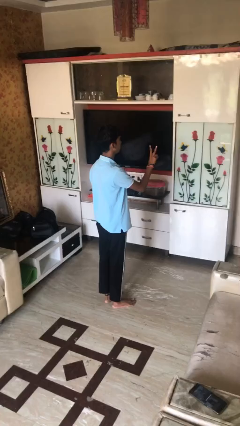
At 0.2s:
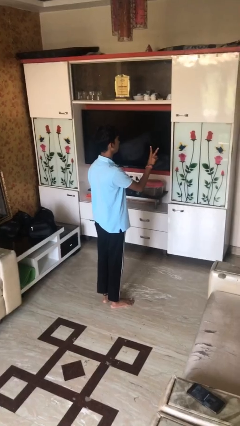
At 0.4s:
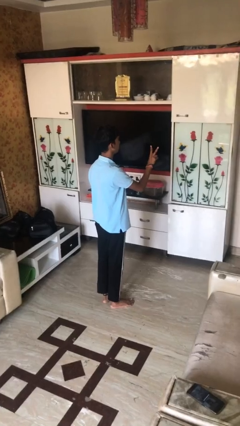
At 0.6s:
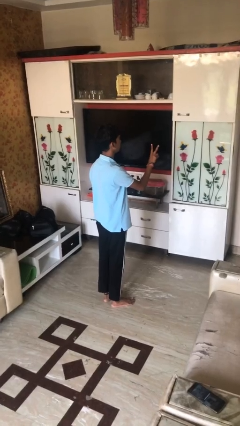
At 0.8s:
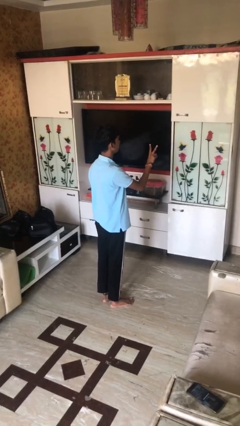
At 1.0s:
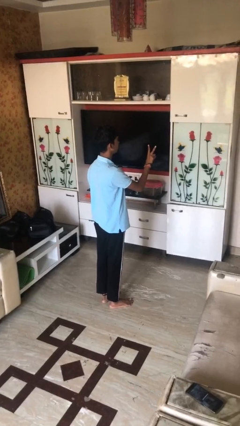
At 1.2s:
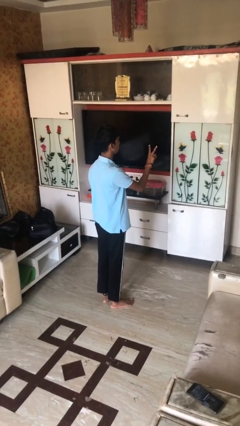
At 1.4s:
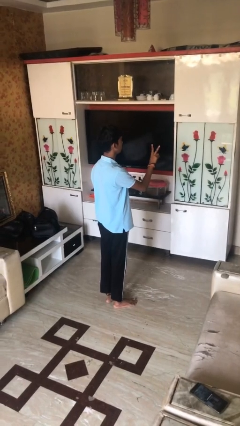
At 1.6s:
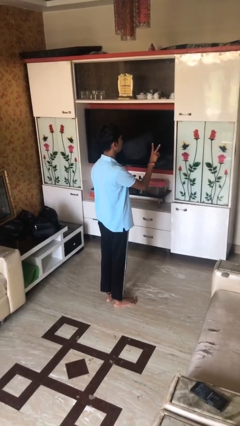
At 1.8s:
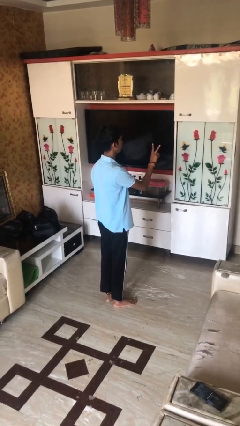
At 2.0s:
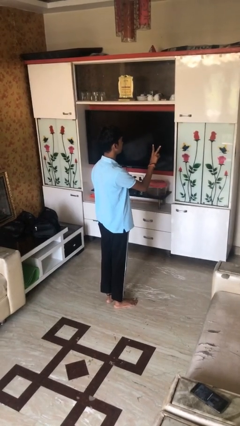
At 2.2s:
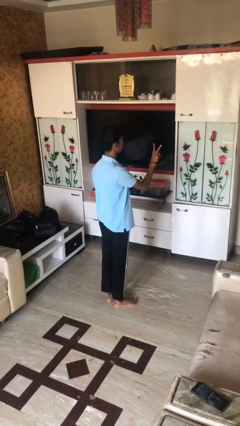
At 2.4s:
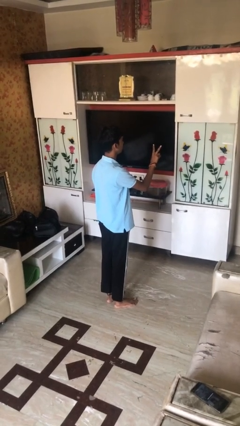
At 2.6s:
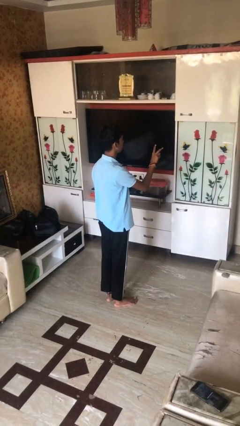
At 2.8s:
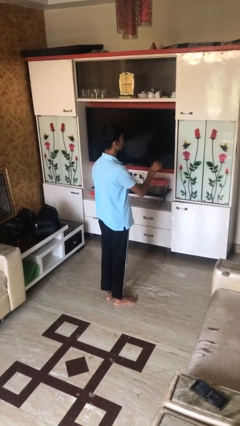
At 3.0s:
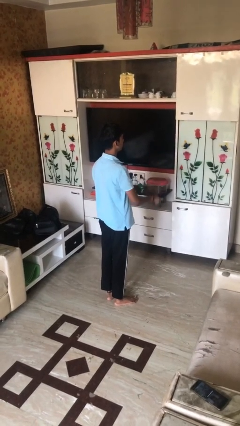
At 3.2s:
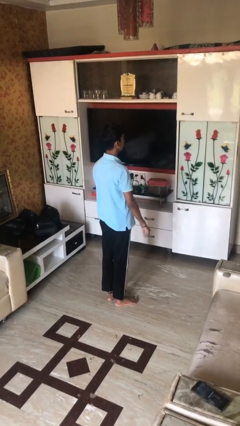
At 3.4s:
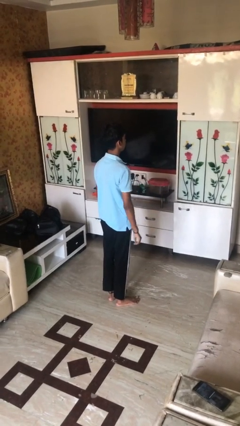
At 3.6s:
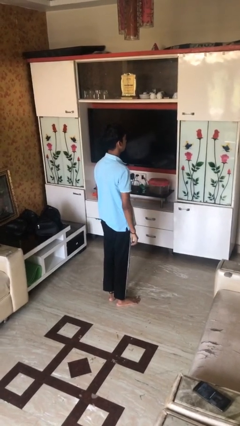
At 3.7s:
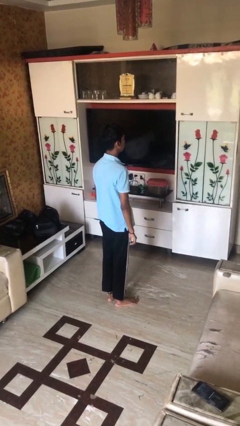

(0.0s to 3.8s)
person gestures peace

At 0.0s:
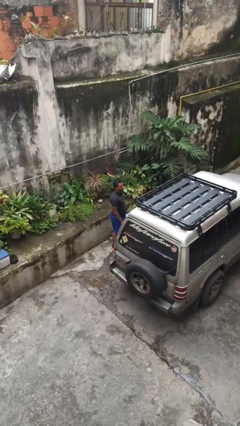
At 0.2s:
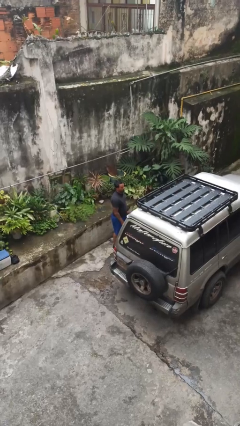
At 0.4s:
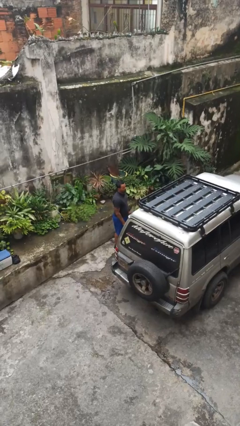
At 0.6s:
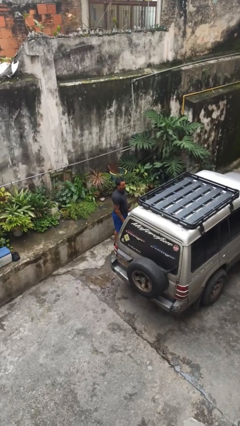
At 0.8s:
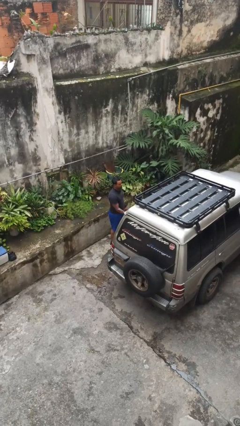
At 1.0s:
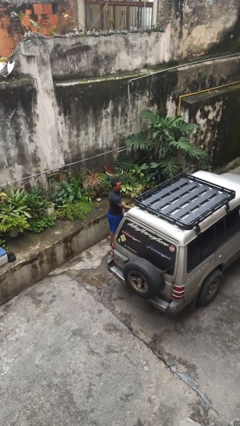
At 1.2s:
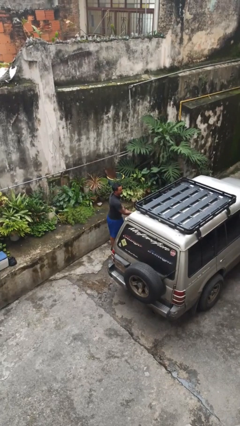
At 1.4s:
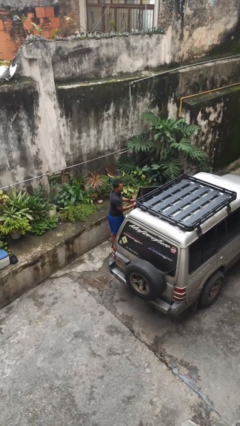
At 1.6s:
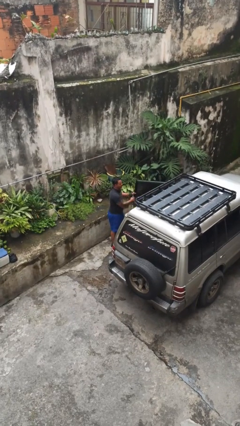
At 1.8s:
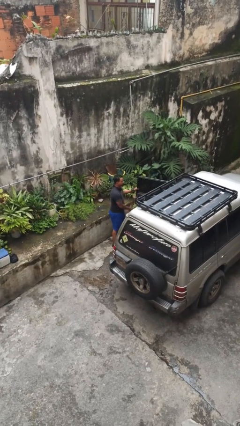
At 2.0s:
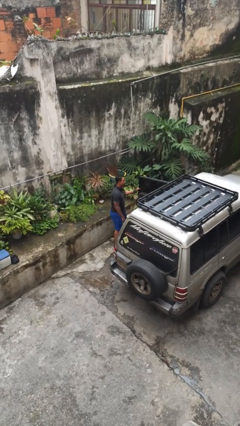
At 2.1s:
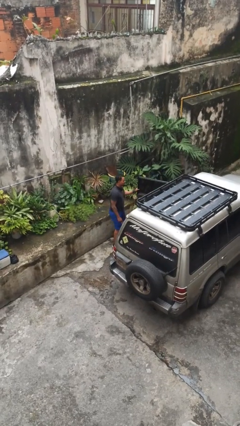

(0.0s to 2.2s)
person opens car door

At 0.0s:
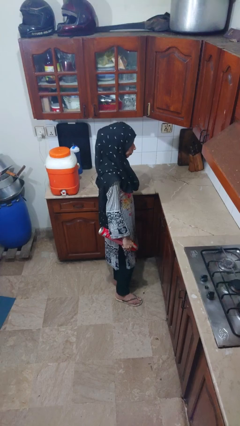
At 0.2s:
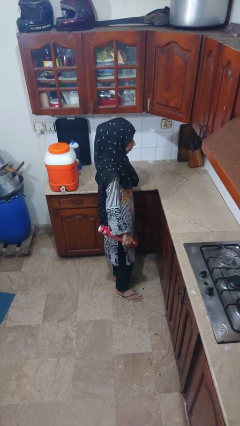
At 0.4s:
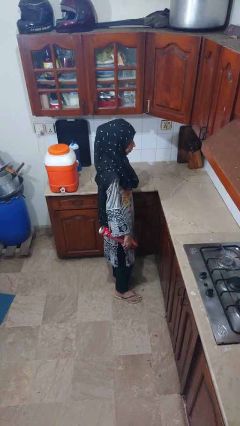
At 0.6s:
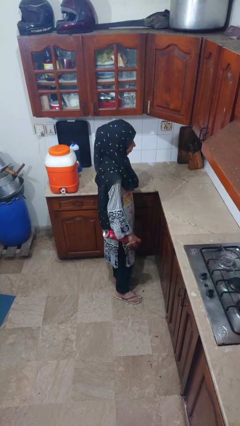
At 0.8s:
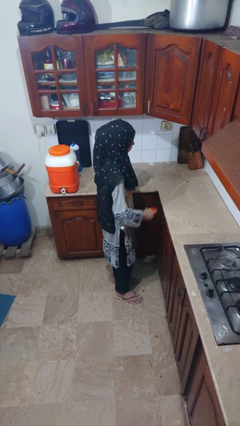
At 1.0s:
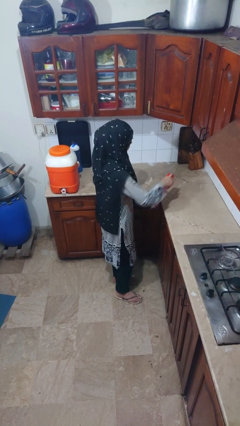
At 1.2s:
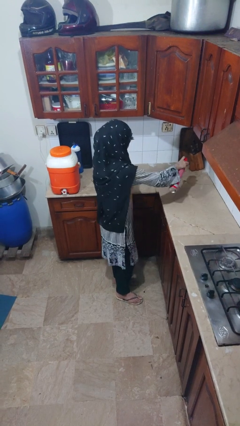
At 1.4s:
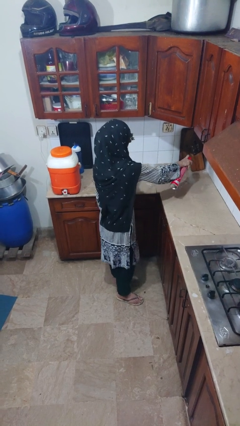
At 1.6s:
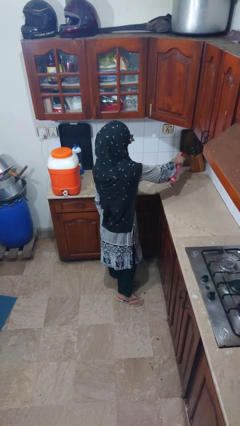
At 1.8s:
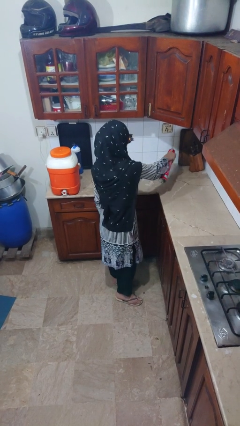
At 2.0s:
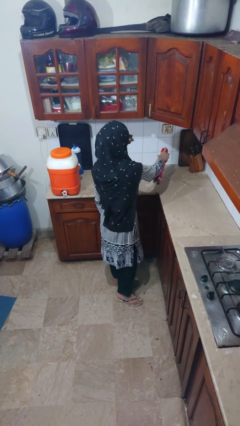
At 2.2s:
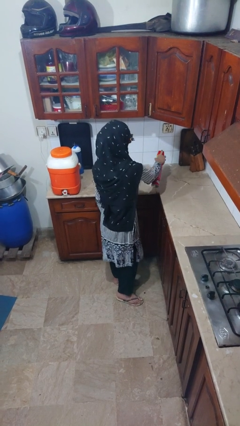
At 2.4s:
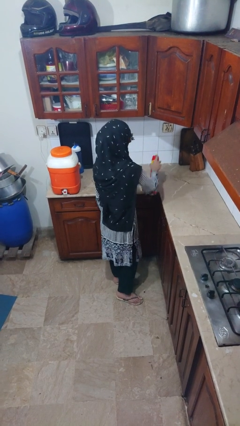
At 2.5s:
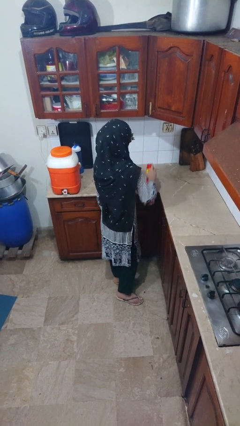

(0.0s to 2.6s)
person sprays from bottle

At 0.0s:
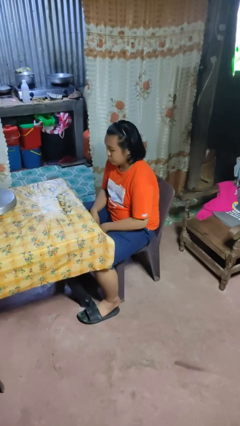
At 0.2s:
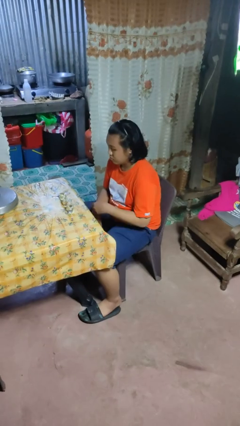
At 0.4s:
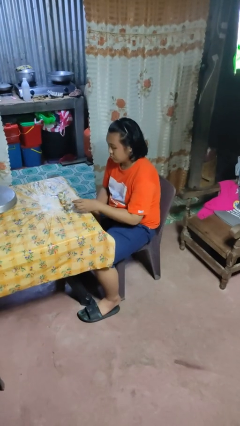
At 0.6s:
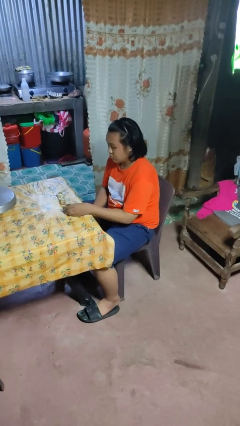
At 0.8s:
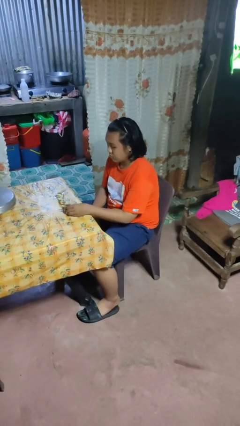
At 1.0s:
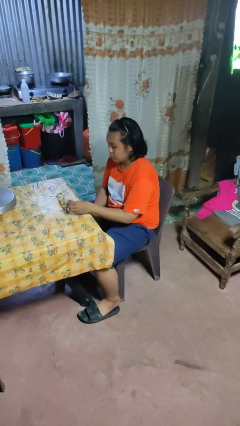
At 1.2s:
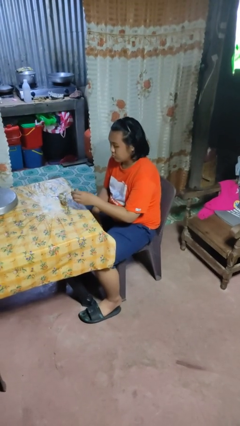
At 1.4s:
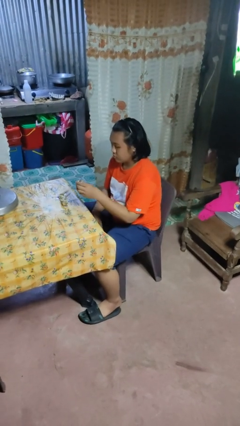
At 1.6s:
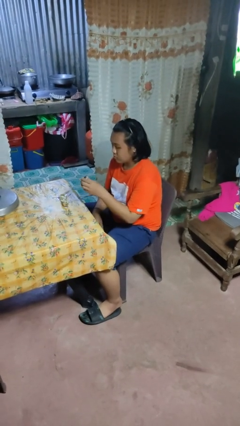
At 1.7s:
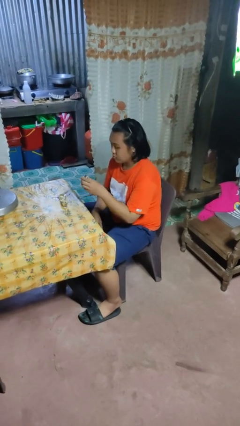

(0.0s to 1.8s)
person picks up object from table

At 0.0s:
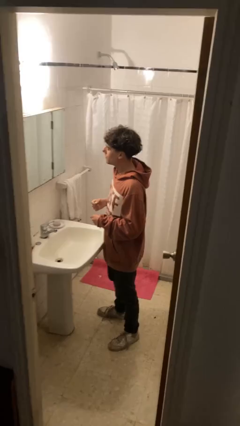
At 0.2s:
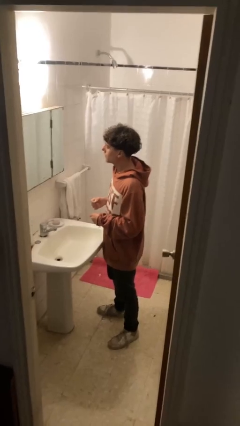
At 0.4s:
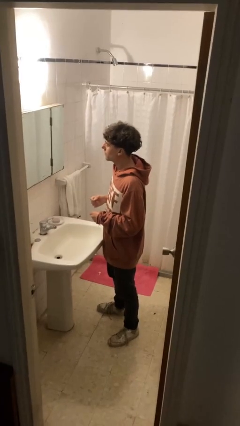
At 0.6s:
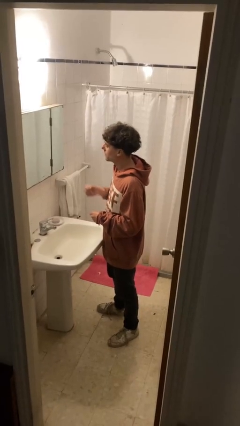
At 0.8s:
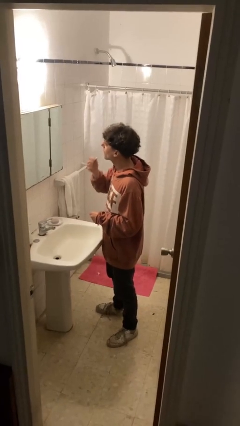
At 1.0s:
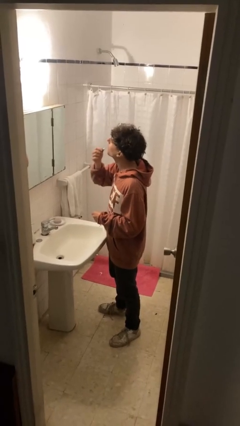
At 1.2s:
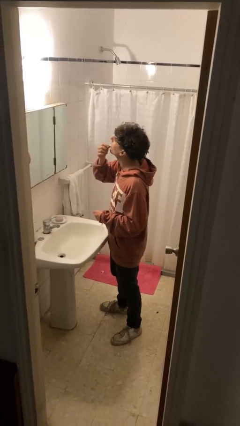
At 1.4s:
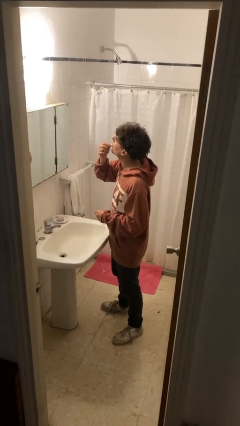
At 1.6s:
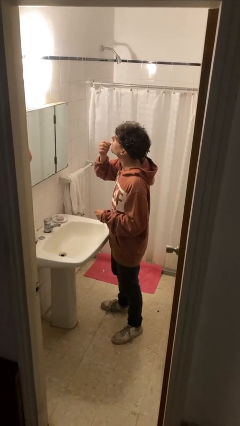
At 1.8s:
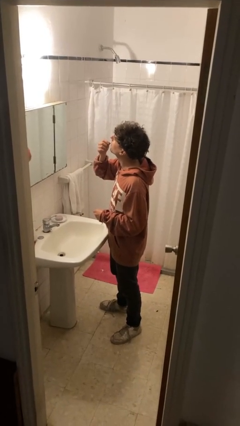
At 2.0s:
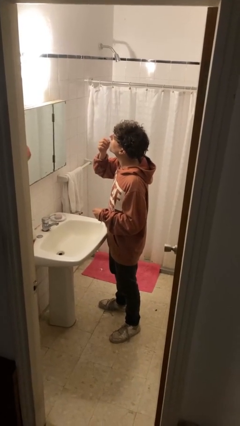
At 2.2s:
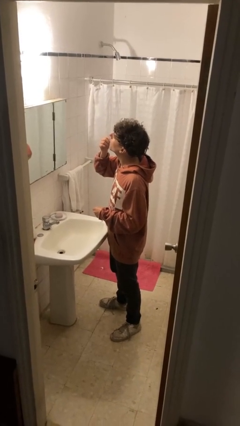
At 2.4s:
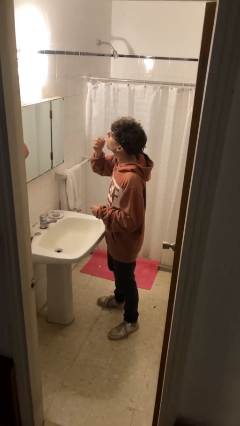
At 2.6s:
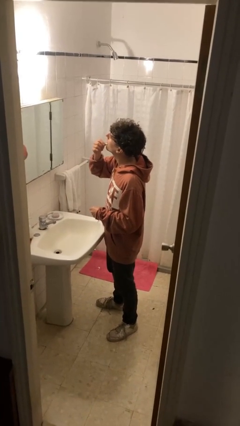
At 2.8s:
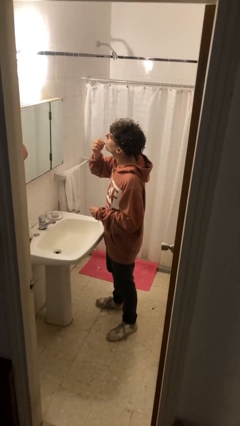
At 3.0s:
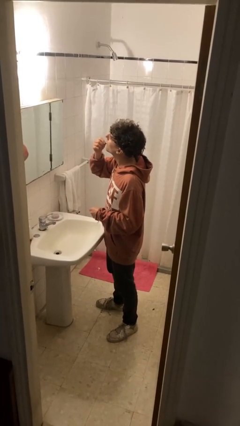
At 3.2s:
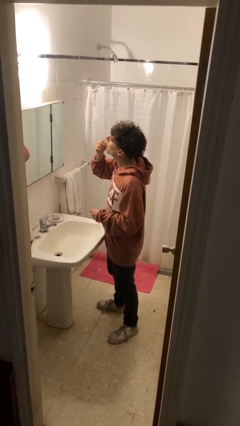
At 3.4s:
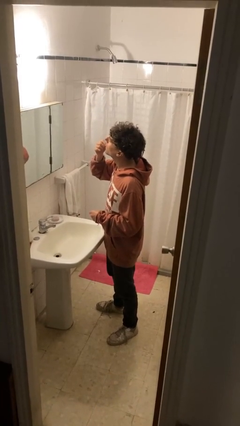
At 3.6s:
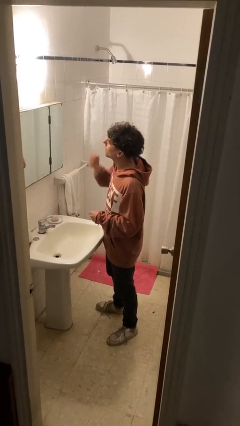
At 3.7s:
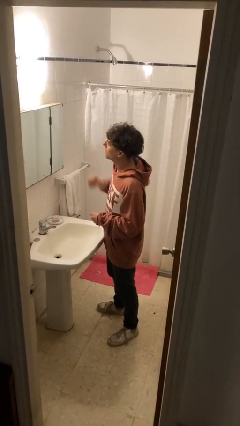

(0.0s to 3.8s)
person applies lip makeup

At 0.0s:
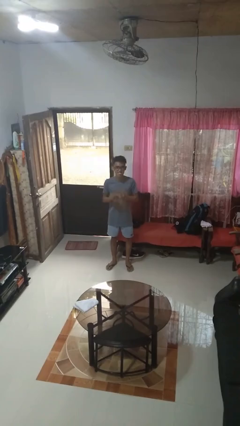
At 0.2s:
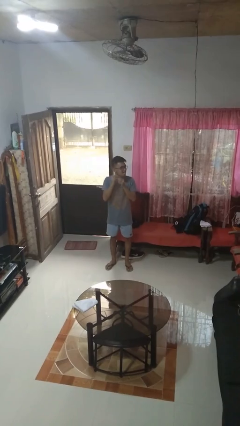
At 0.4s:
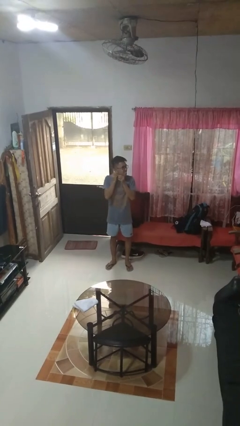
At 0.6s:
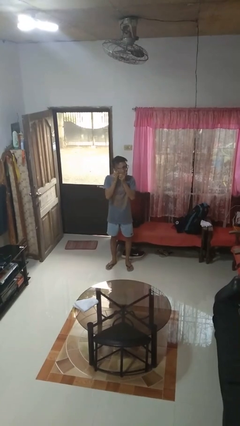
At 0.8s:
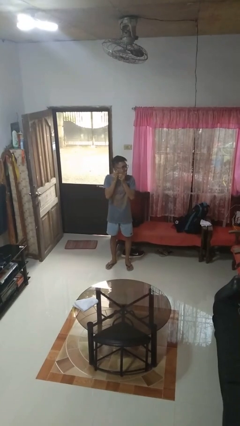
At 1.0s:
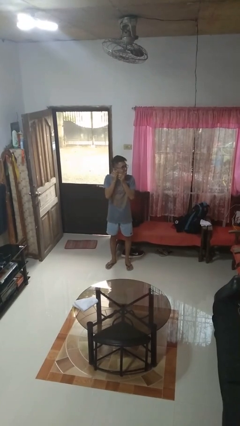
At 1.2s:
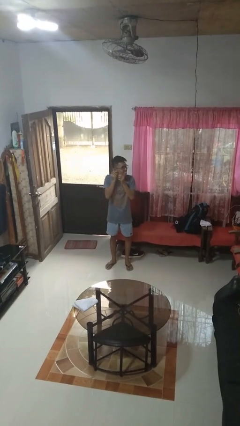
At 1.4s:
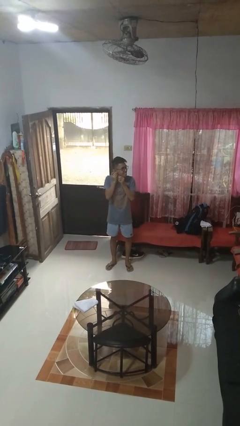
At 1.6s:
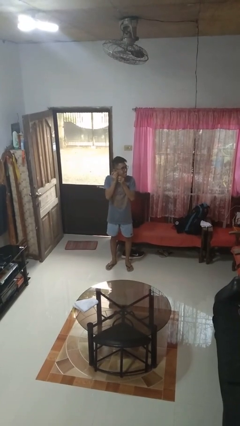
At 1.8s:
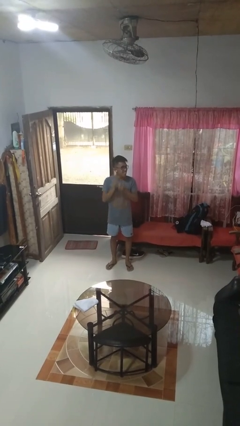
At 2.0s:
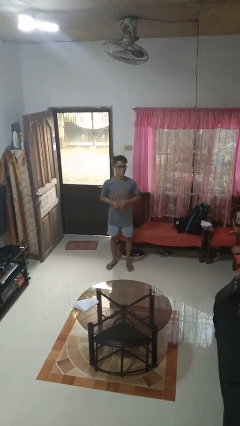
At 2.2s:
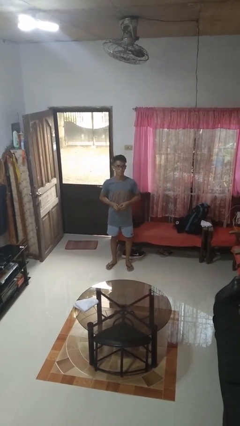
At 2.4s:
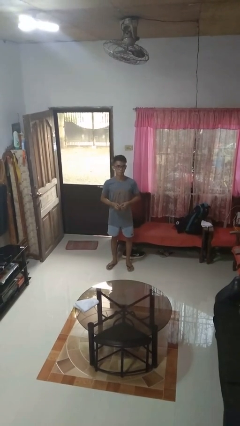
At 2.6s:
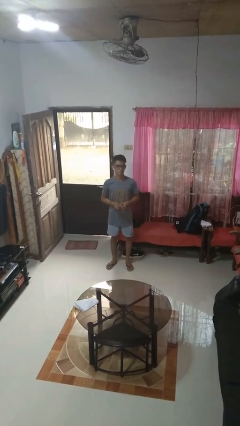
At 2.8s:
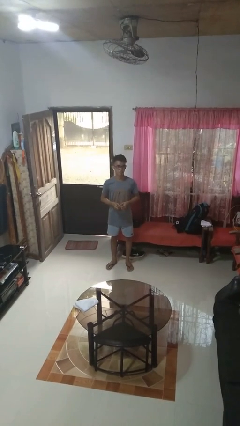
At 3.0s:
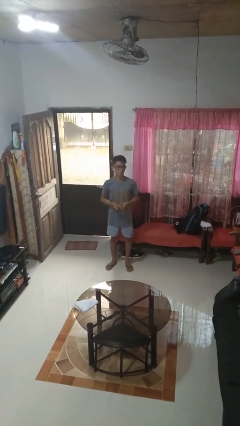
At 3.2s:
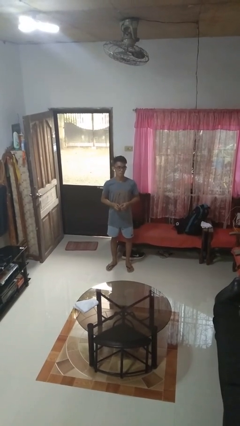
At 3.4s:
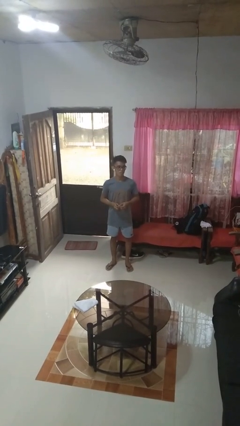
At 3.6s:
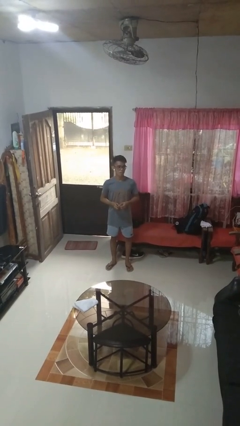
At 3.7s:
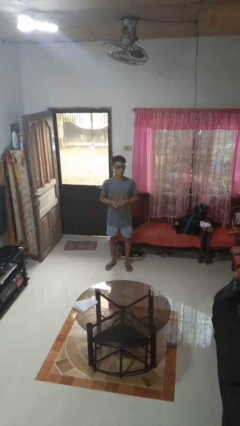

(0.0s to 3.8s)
person puts on earrings
